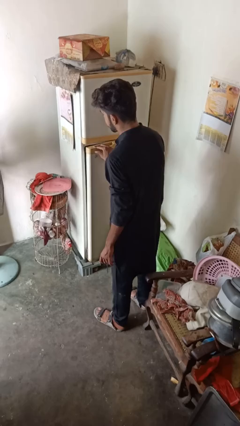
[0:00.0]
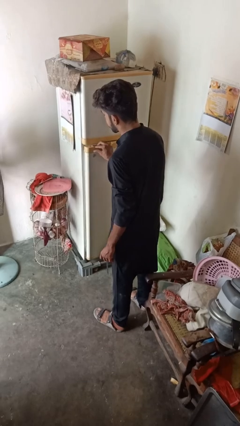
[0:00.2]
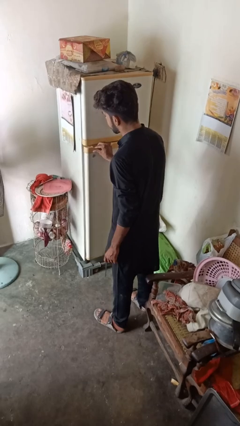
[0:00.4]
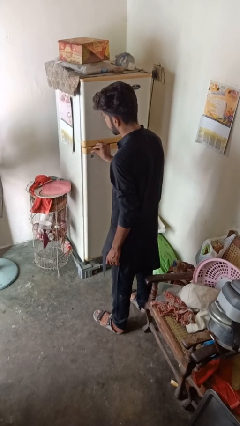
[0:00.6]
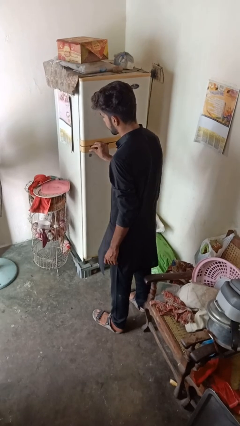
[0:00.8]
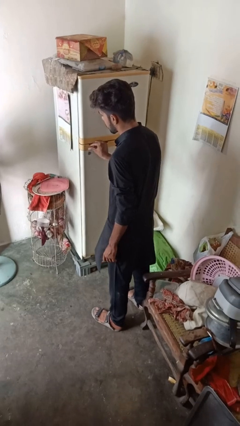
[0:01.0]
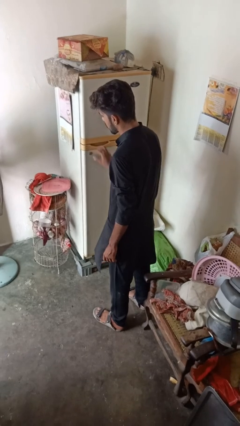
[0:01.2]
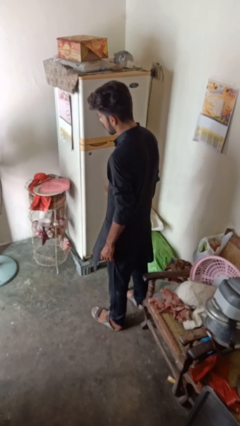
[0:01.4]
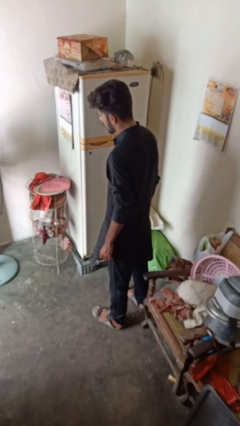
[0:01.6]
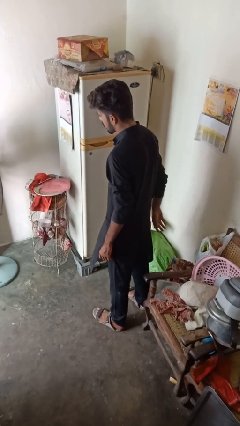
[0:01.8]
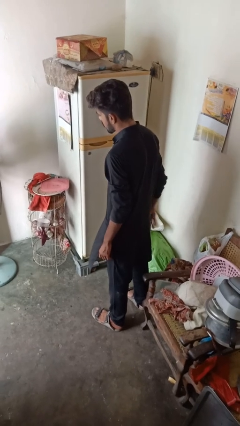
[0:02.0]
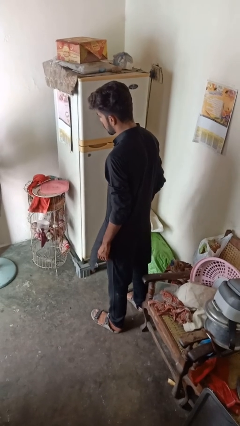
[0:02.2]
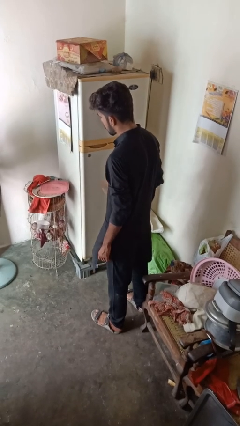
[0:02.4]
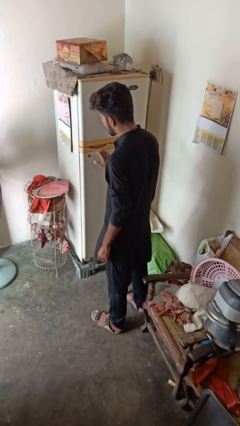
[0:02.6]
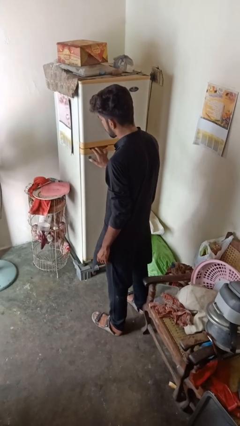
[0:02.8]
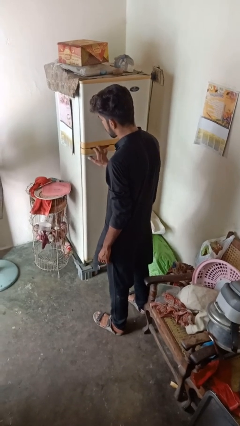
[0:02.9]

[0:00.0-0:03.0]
person closes refrigerator

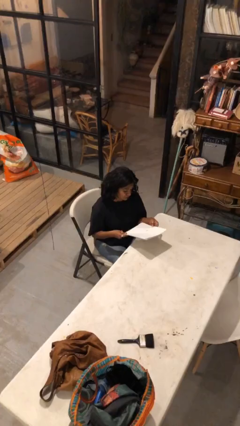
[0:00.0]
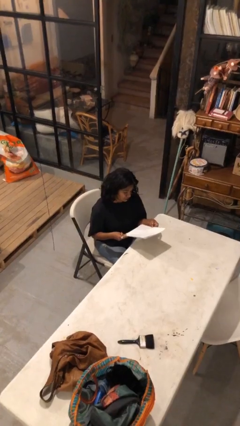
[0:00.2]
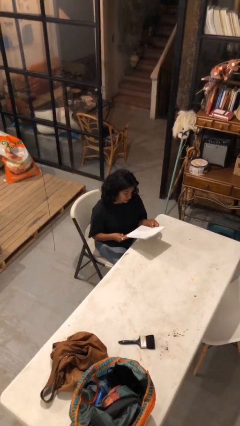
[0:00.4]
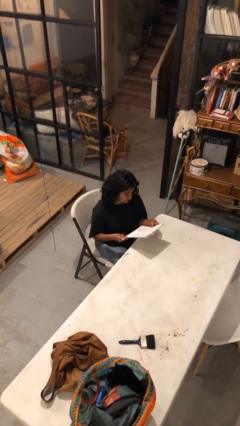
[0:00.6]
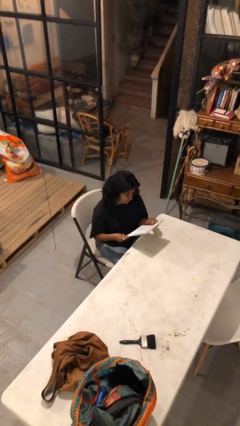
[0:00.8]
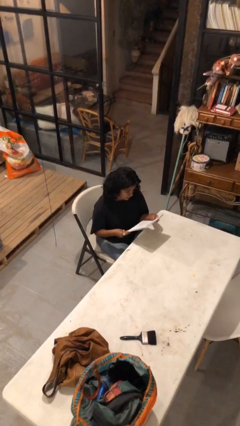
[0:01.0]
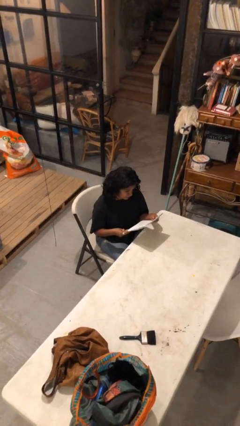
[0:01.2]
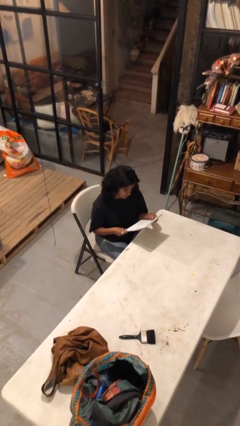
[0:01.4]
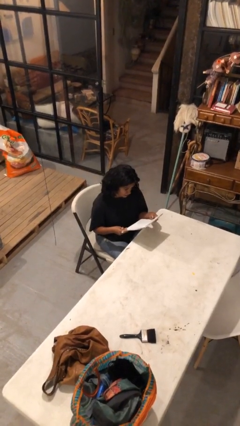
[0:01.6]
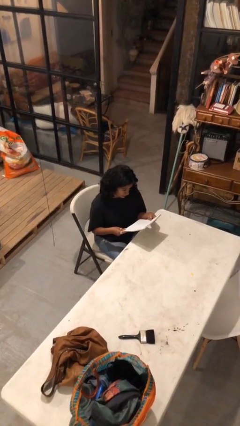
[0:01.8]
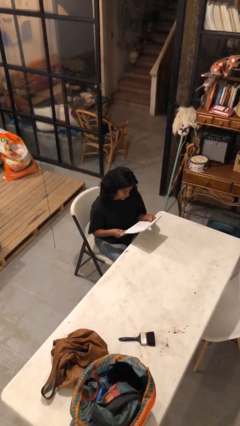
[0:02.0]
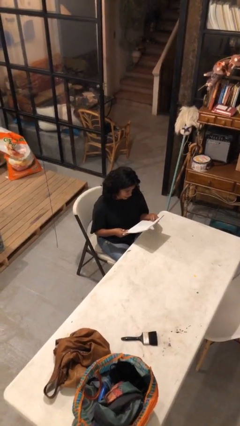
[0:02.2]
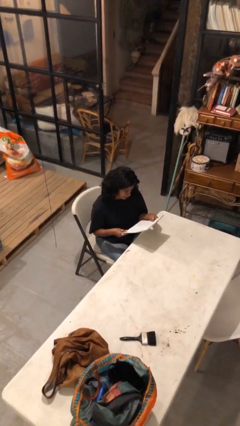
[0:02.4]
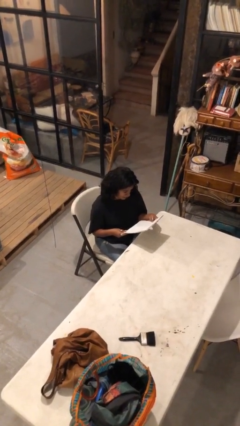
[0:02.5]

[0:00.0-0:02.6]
person reads document

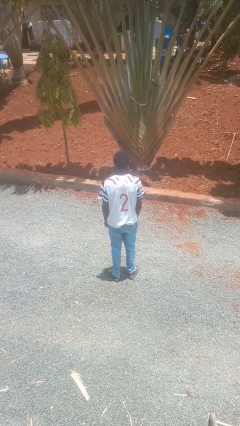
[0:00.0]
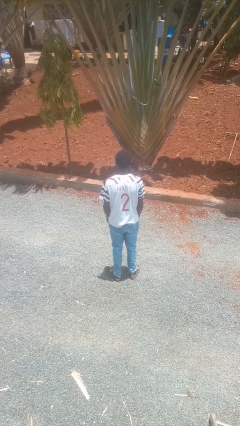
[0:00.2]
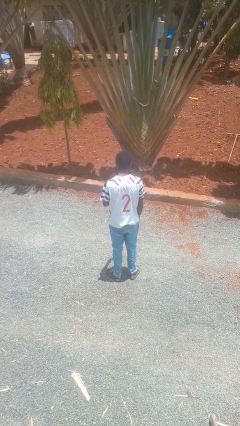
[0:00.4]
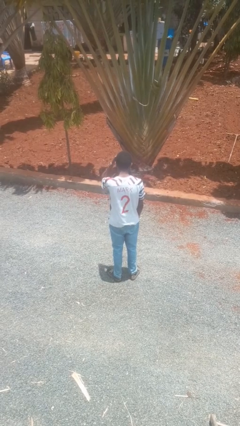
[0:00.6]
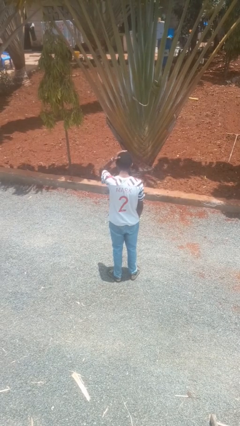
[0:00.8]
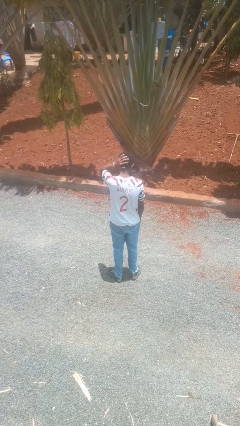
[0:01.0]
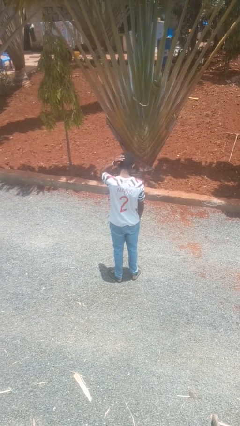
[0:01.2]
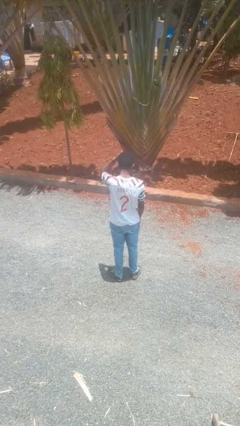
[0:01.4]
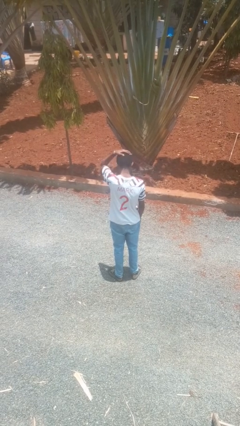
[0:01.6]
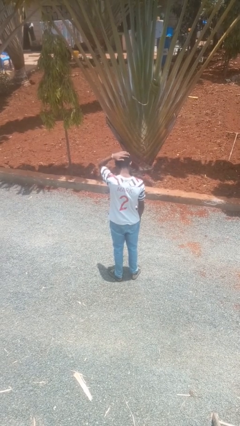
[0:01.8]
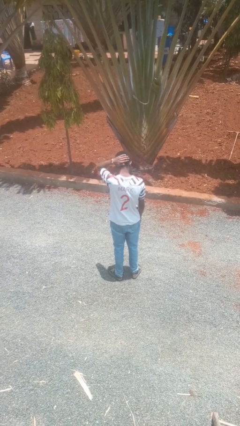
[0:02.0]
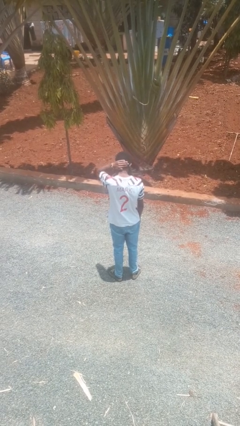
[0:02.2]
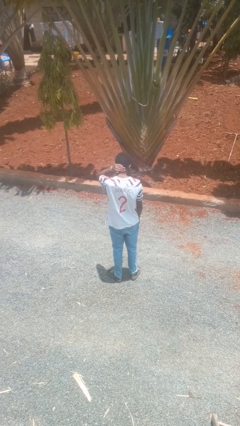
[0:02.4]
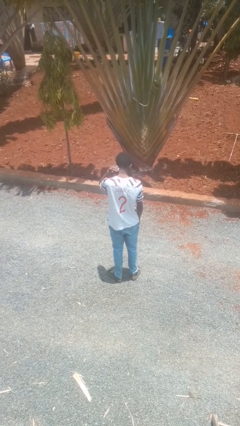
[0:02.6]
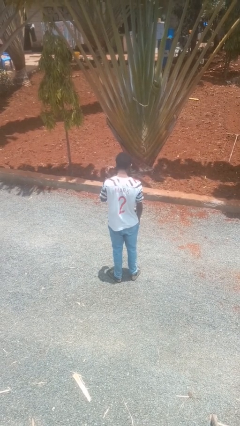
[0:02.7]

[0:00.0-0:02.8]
person strokes hair

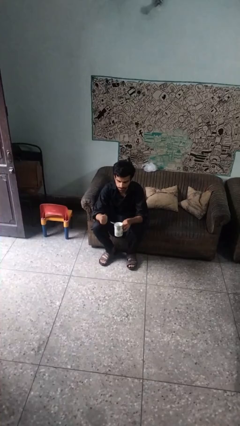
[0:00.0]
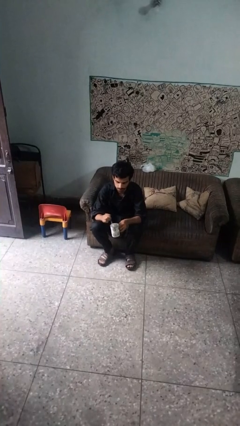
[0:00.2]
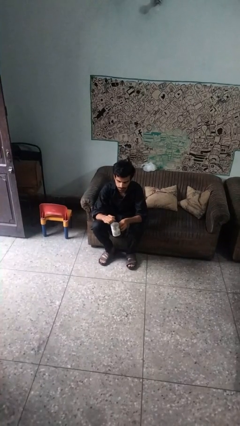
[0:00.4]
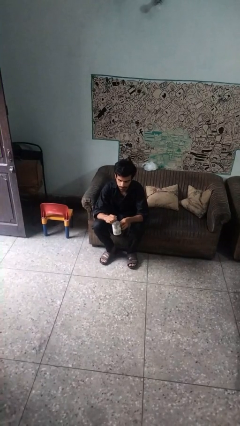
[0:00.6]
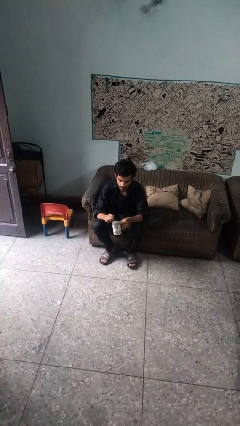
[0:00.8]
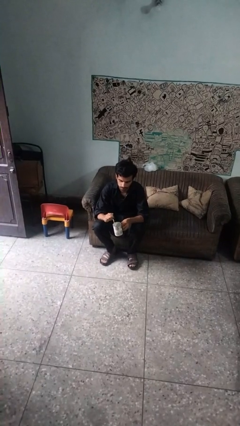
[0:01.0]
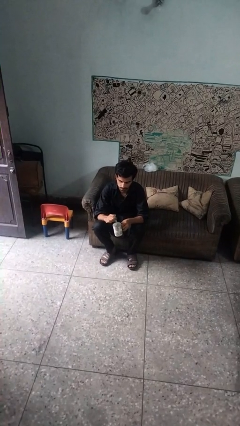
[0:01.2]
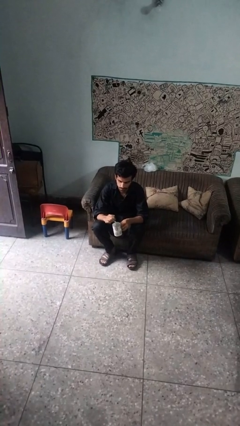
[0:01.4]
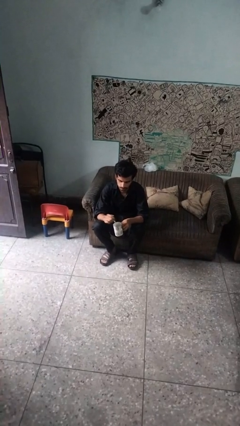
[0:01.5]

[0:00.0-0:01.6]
person stirs mug

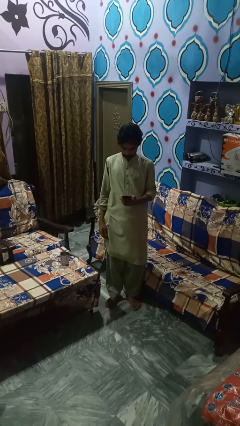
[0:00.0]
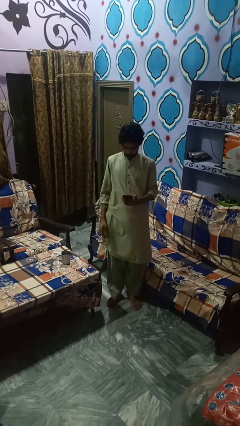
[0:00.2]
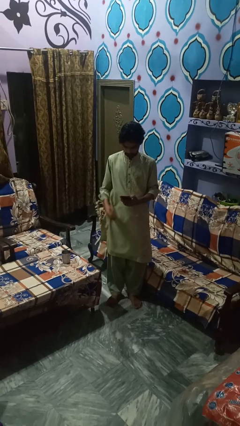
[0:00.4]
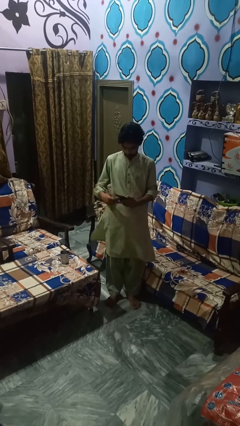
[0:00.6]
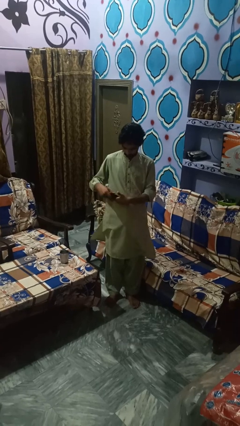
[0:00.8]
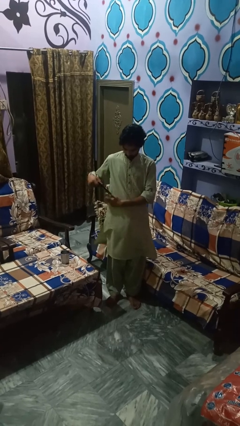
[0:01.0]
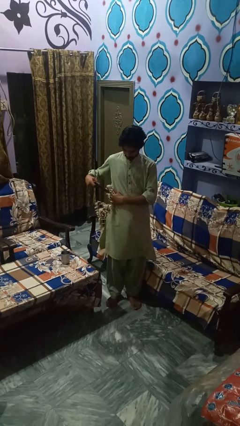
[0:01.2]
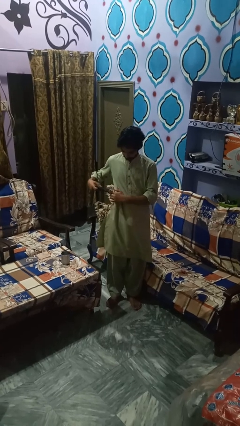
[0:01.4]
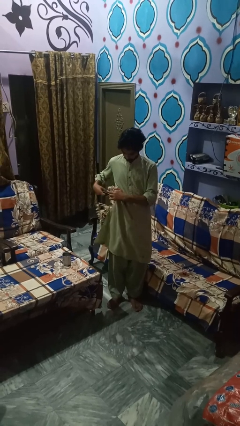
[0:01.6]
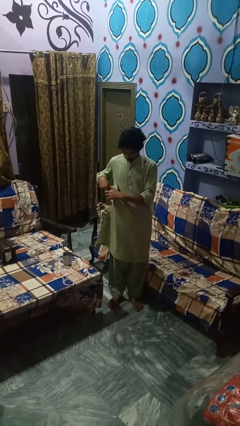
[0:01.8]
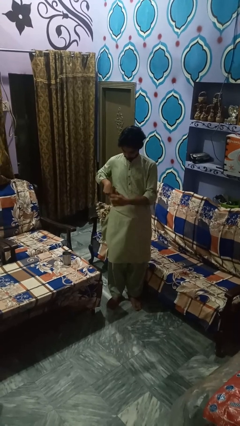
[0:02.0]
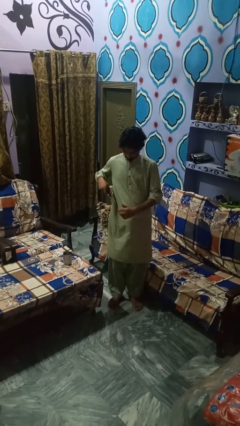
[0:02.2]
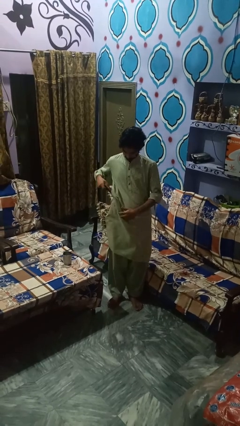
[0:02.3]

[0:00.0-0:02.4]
person puts phone into pocket

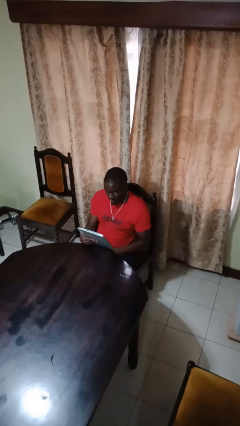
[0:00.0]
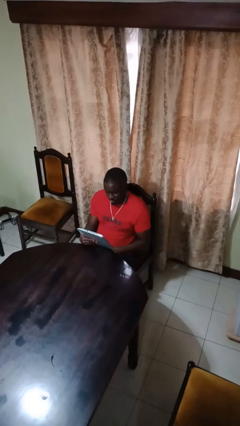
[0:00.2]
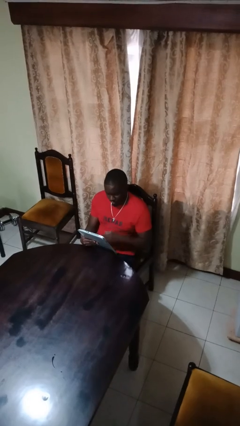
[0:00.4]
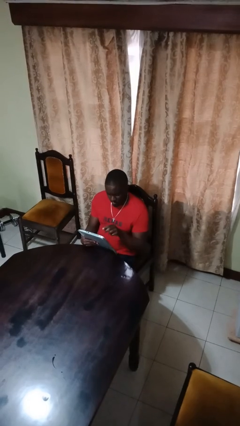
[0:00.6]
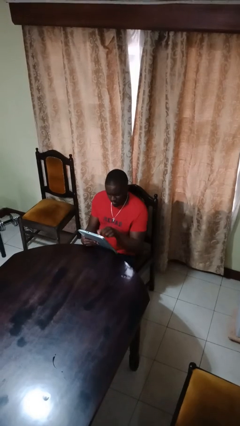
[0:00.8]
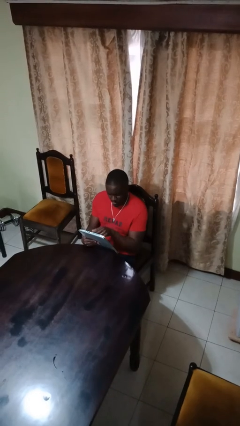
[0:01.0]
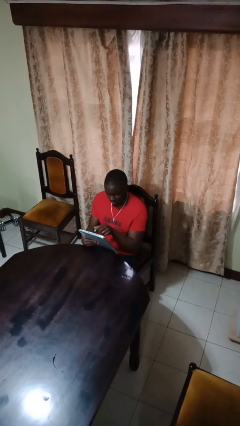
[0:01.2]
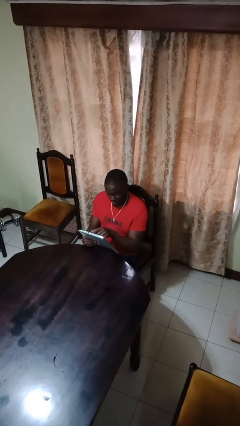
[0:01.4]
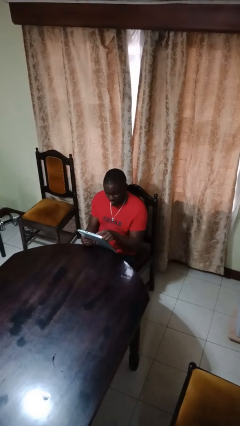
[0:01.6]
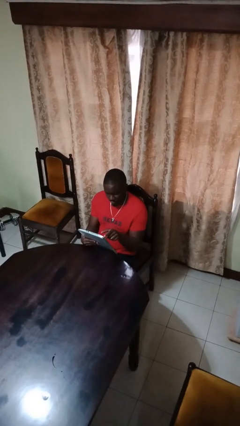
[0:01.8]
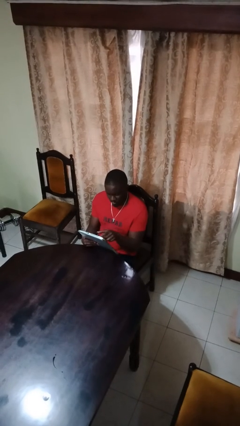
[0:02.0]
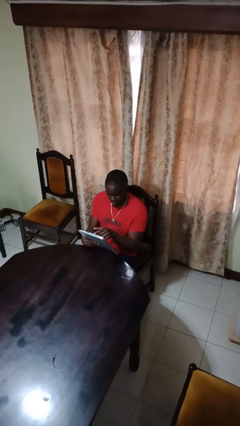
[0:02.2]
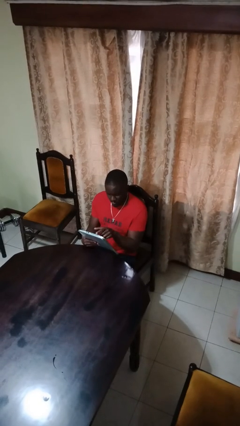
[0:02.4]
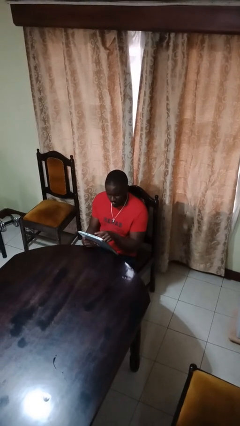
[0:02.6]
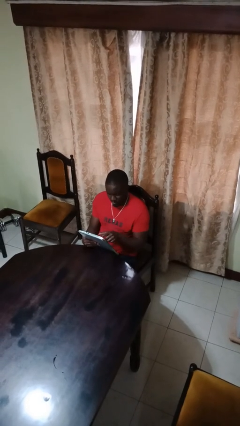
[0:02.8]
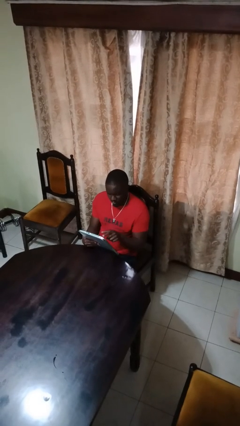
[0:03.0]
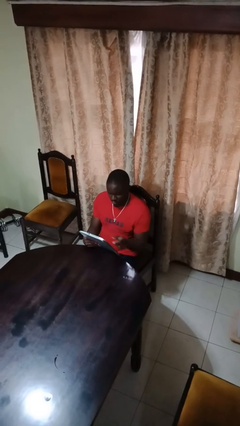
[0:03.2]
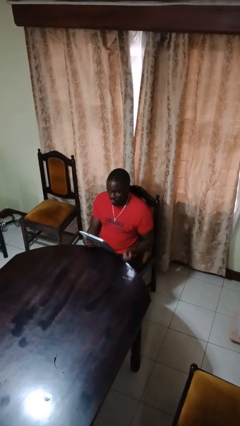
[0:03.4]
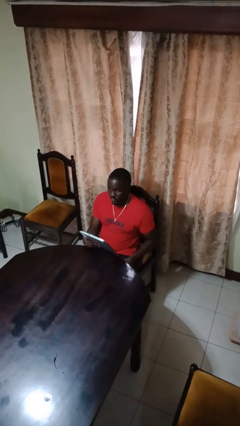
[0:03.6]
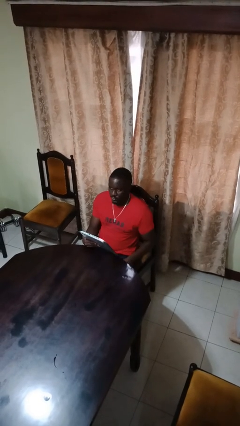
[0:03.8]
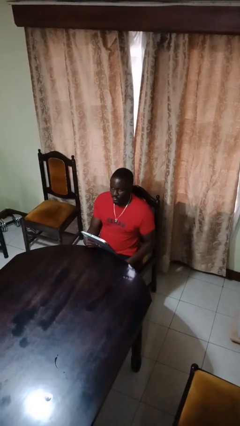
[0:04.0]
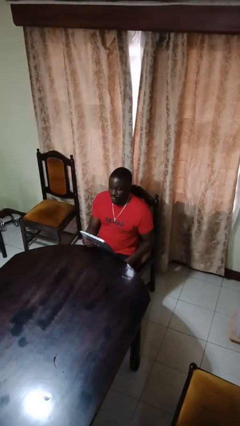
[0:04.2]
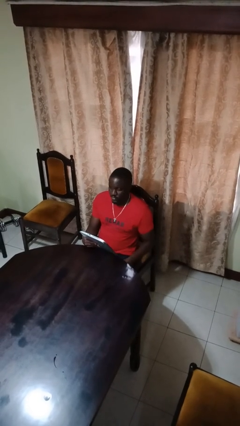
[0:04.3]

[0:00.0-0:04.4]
person interacts with tablet
